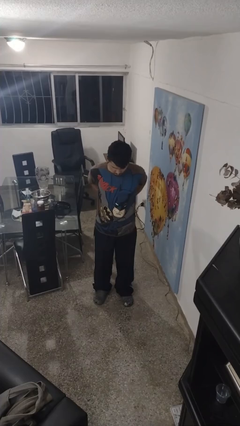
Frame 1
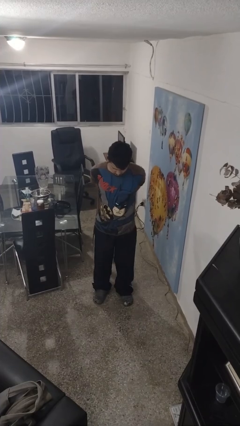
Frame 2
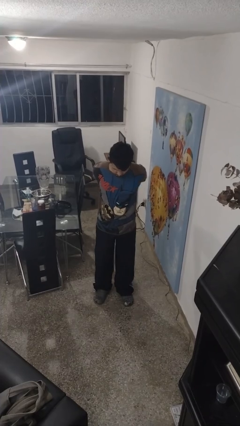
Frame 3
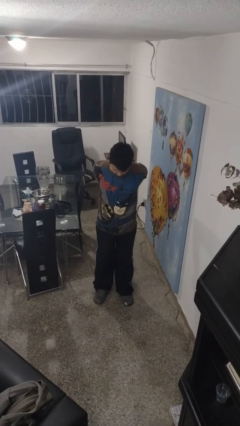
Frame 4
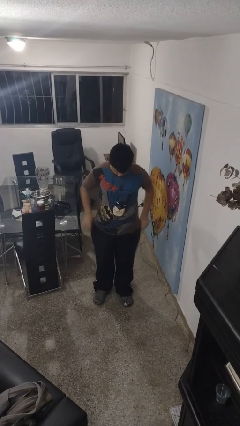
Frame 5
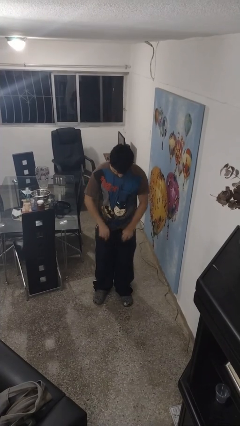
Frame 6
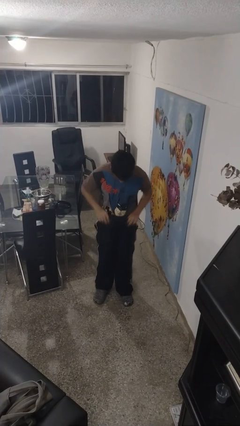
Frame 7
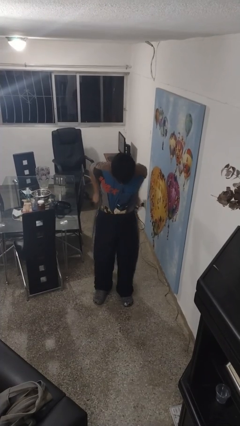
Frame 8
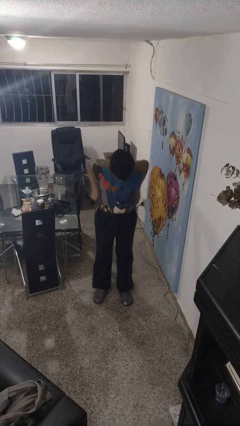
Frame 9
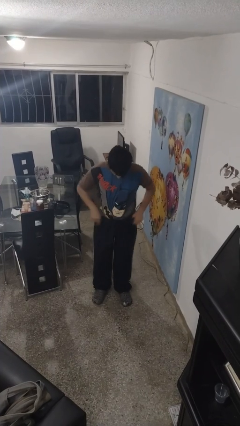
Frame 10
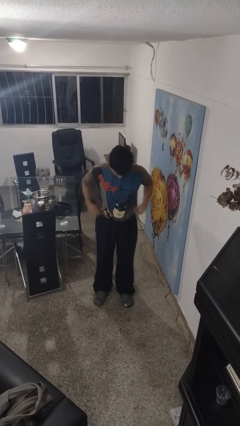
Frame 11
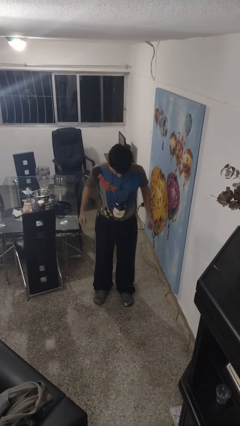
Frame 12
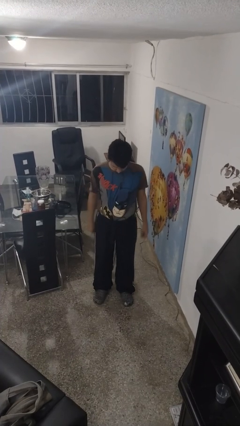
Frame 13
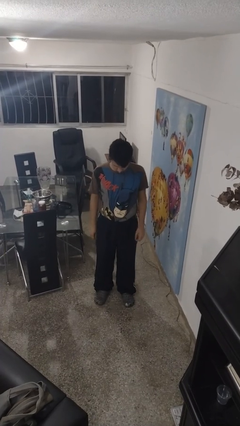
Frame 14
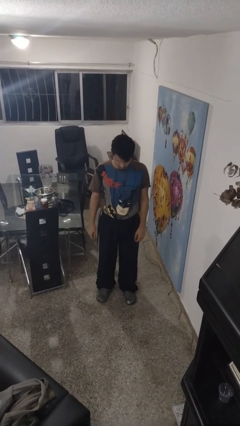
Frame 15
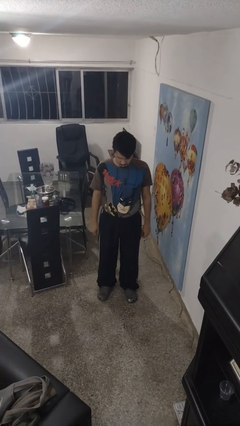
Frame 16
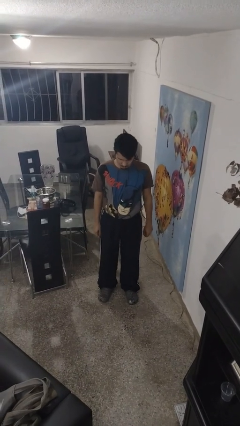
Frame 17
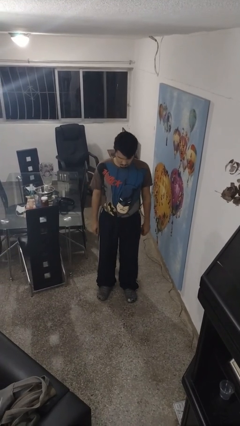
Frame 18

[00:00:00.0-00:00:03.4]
person tucks in shirt

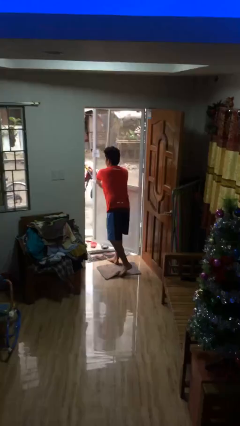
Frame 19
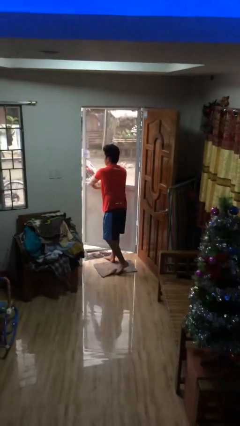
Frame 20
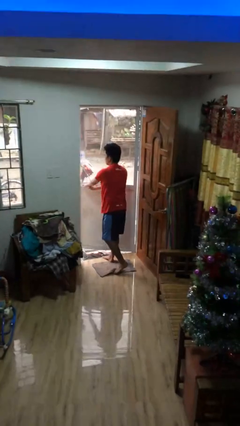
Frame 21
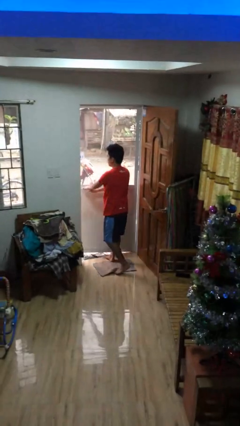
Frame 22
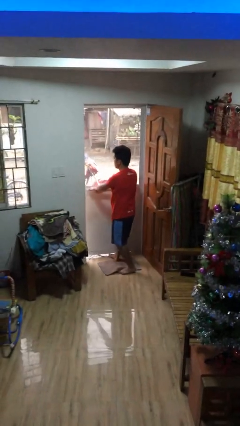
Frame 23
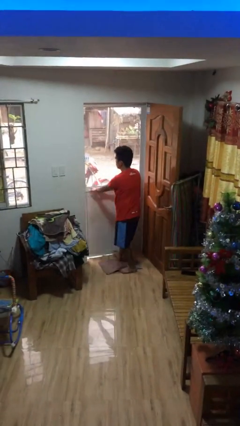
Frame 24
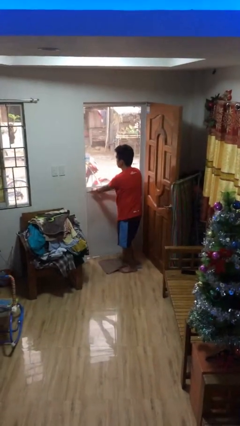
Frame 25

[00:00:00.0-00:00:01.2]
person closes facility door

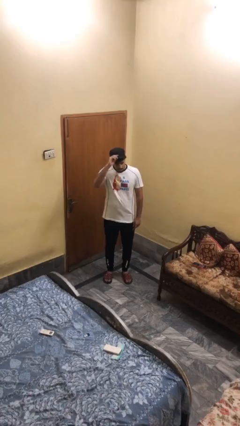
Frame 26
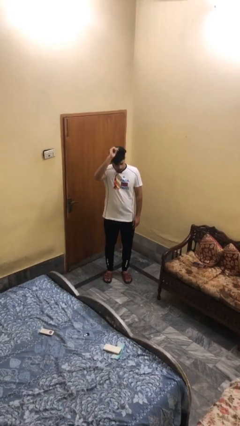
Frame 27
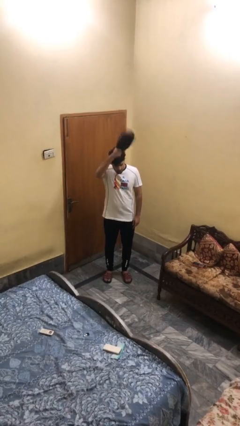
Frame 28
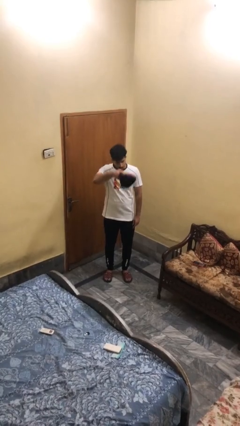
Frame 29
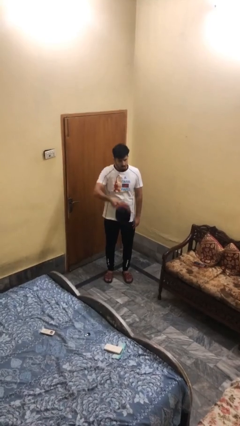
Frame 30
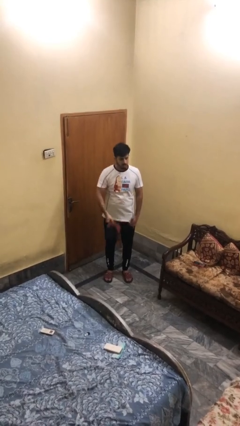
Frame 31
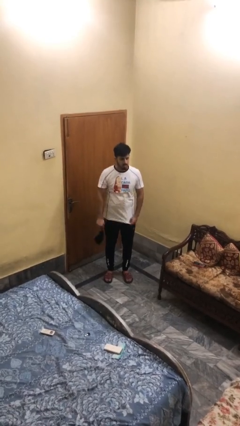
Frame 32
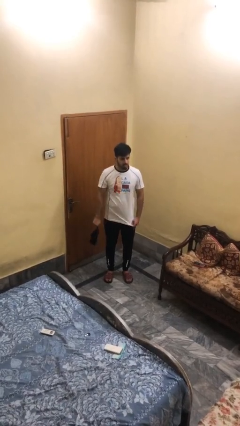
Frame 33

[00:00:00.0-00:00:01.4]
person takes off hat

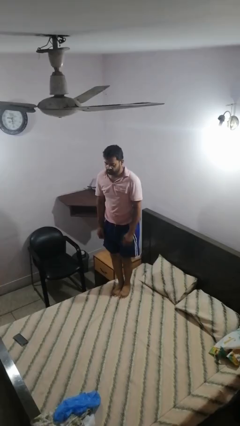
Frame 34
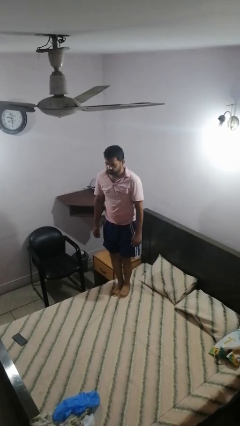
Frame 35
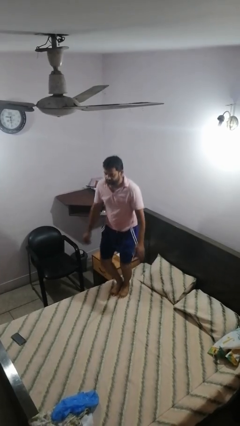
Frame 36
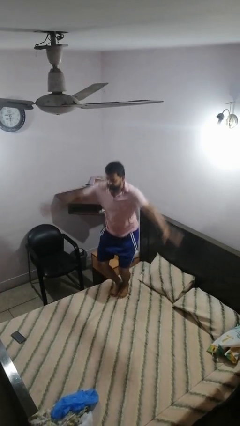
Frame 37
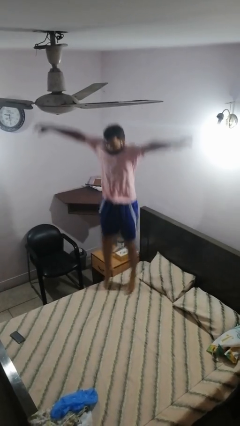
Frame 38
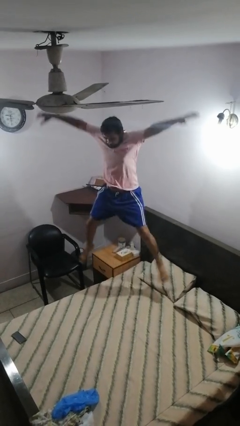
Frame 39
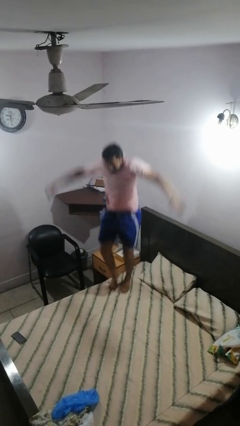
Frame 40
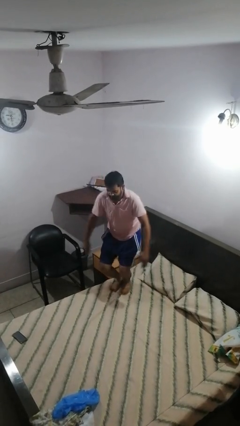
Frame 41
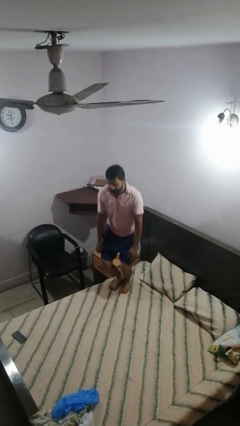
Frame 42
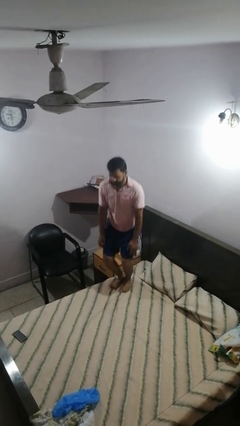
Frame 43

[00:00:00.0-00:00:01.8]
person jumps on bed

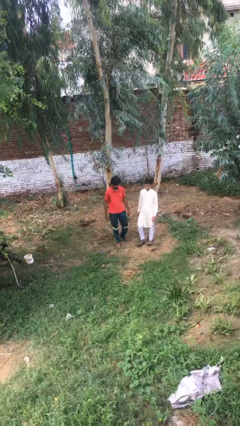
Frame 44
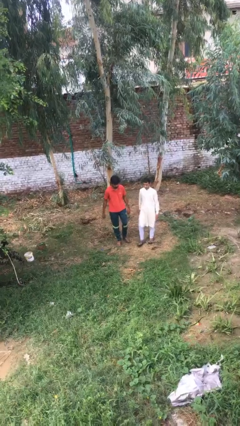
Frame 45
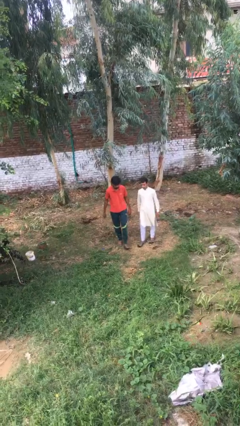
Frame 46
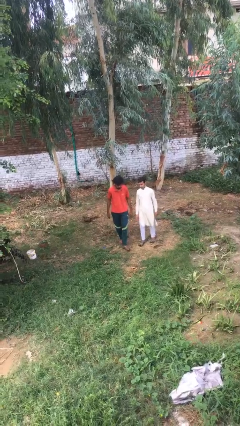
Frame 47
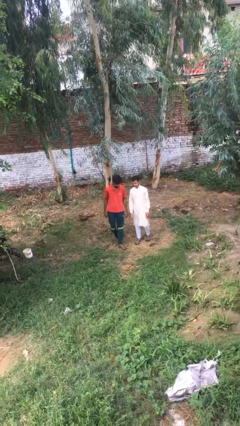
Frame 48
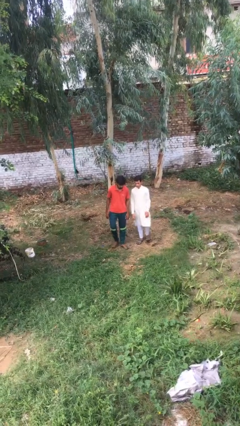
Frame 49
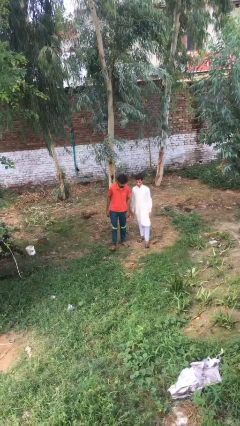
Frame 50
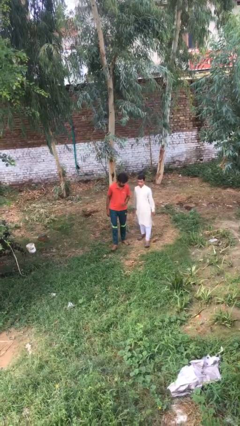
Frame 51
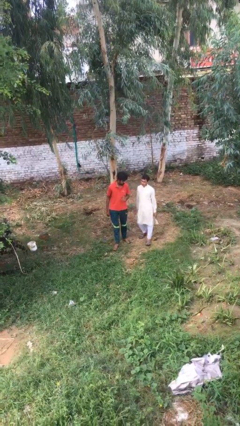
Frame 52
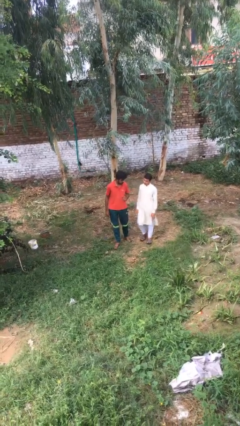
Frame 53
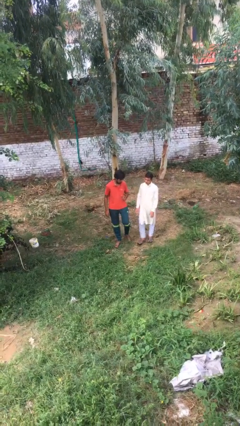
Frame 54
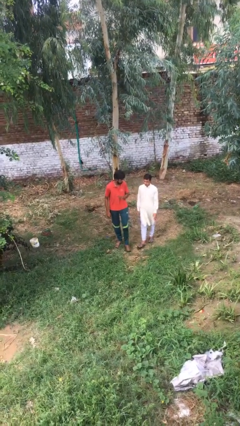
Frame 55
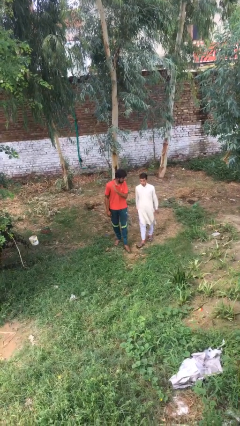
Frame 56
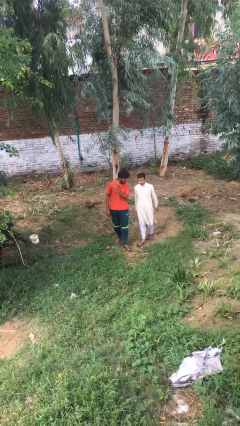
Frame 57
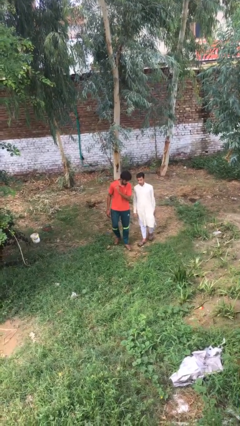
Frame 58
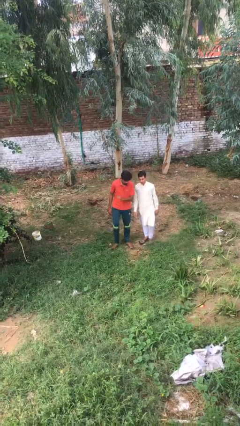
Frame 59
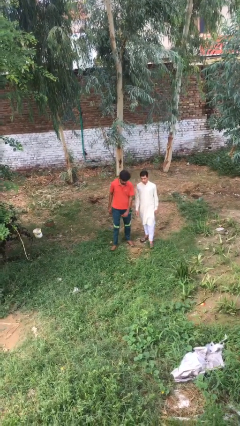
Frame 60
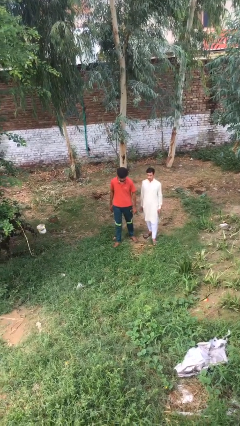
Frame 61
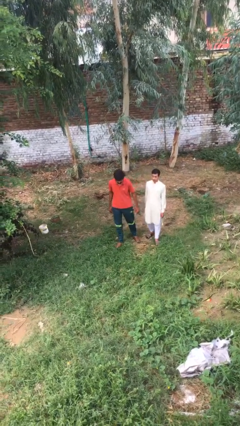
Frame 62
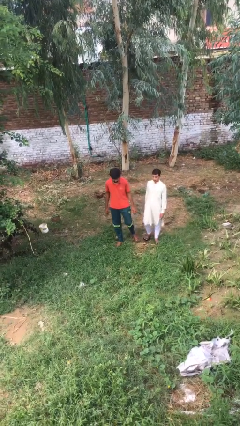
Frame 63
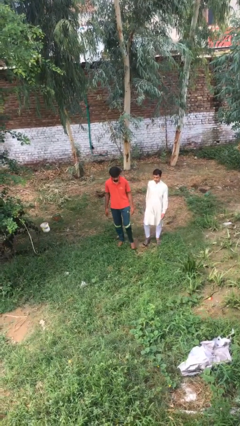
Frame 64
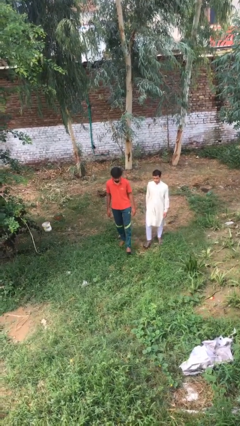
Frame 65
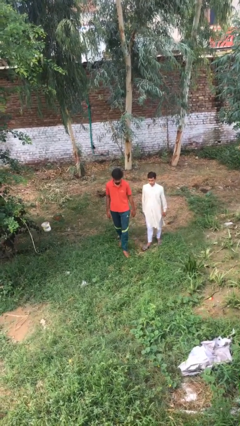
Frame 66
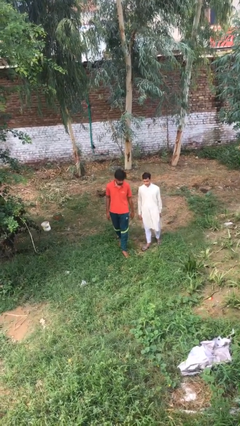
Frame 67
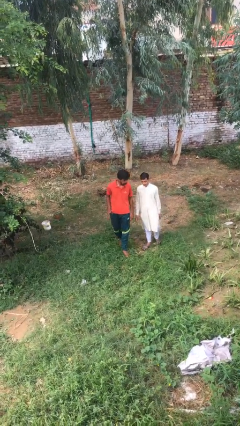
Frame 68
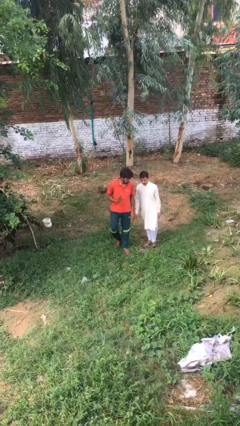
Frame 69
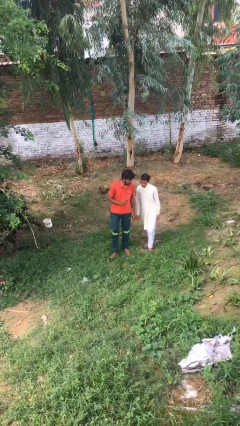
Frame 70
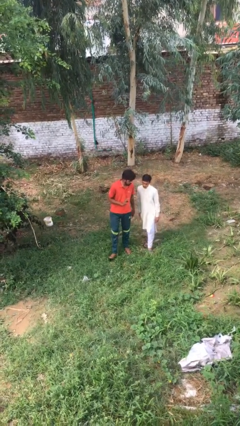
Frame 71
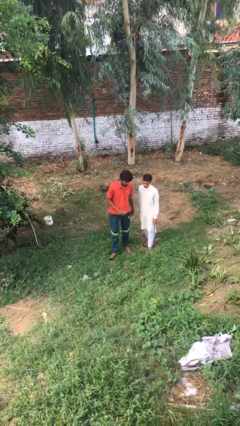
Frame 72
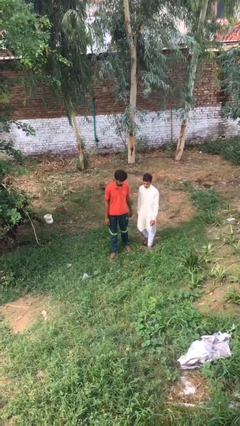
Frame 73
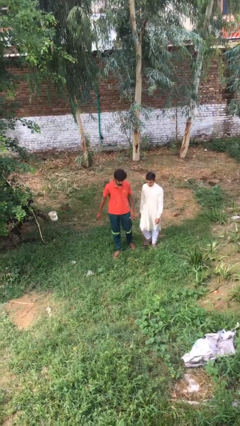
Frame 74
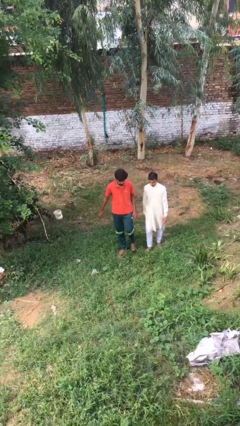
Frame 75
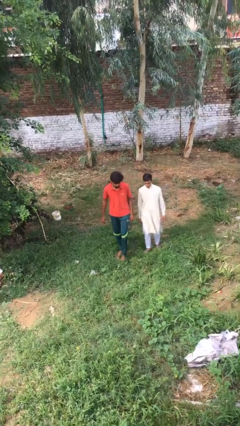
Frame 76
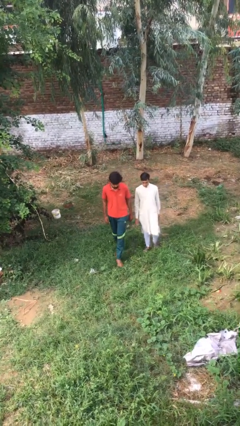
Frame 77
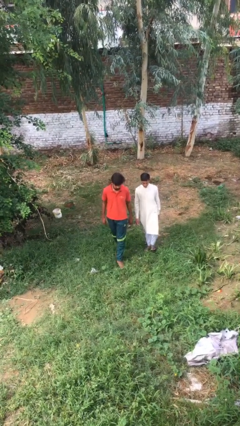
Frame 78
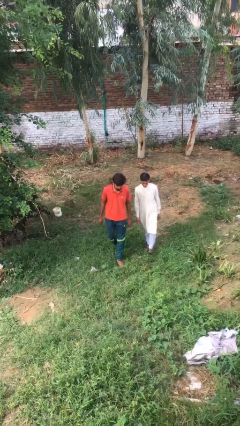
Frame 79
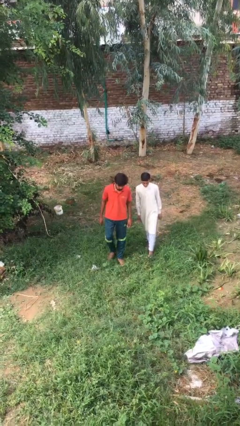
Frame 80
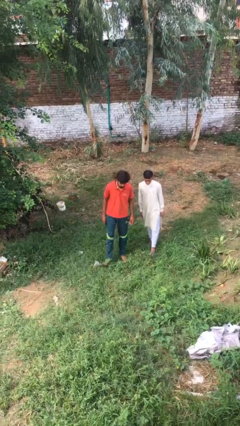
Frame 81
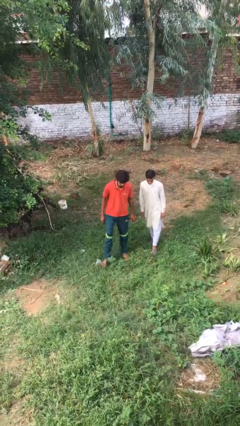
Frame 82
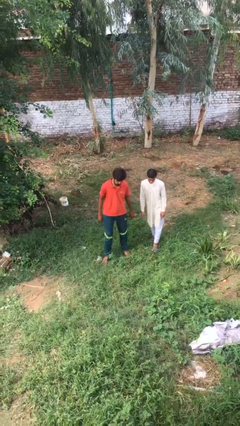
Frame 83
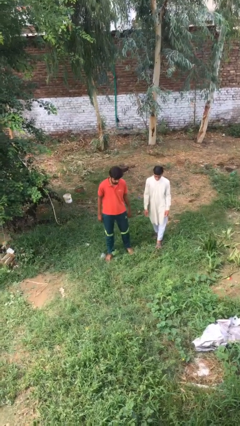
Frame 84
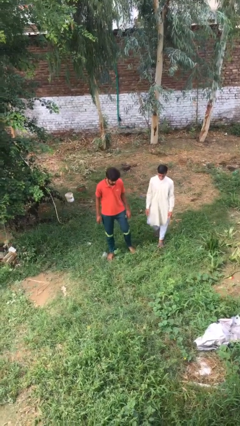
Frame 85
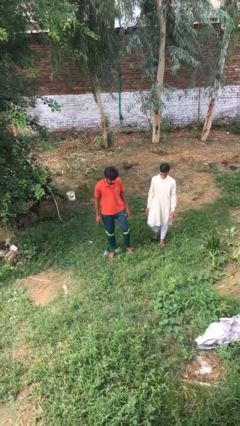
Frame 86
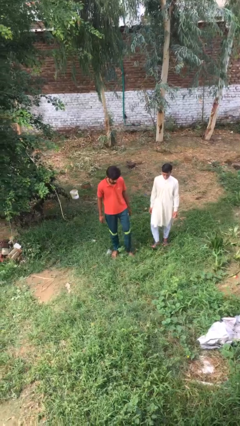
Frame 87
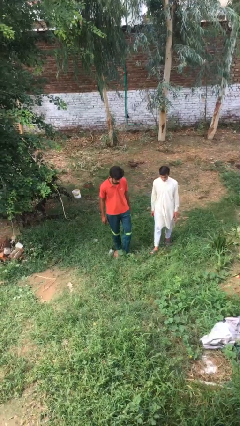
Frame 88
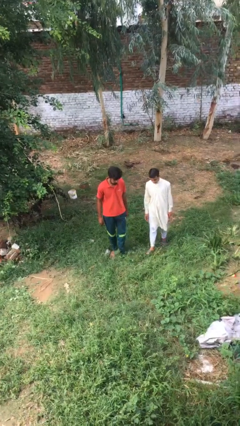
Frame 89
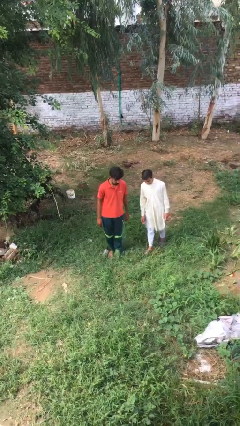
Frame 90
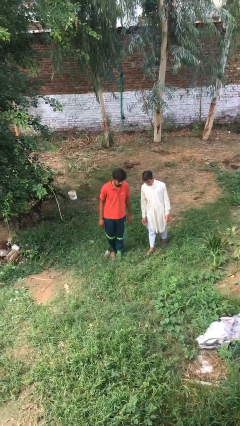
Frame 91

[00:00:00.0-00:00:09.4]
person talks to person

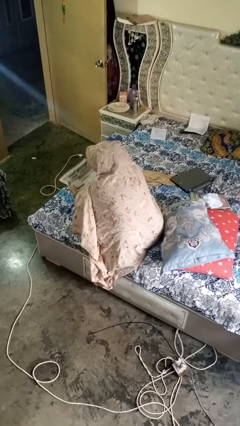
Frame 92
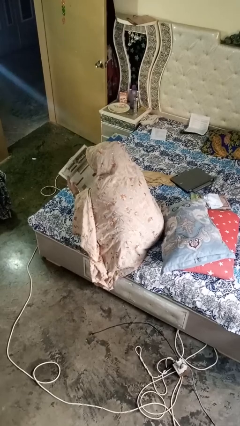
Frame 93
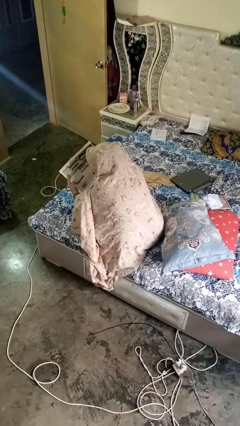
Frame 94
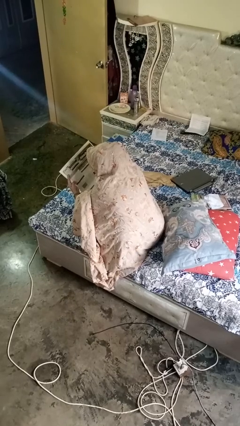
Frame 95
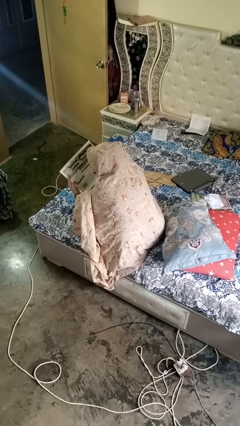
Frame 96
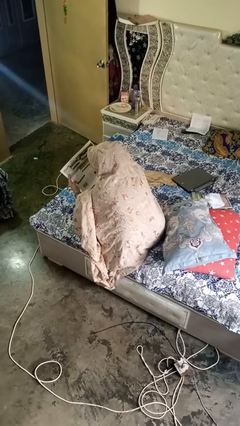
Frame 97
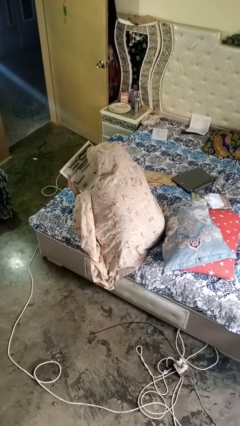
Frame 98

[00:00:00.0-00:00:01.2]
person reads newspaper
